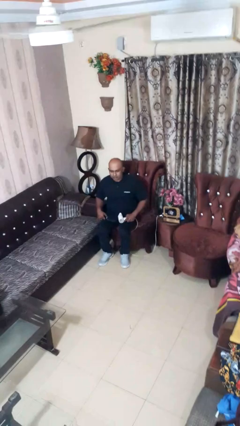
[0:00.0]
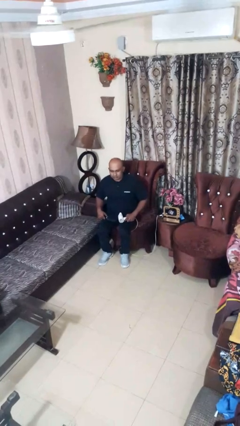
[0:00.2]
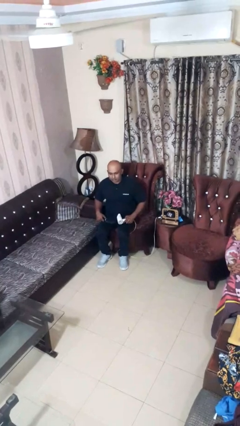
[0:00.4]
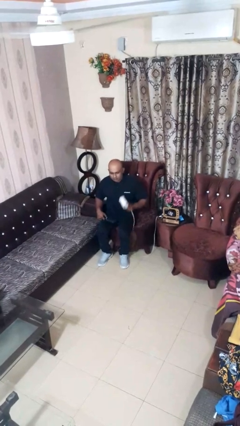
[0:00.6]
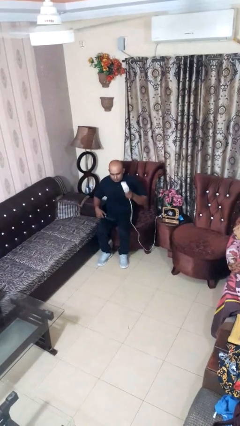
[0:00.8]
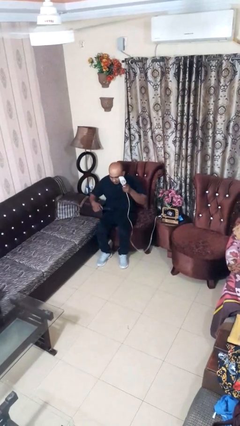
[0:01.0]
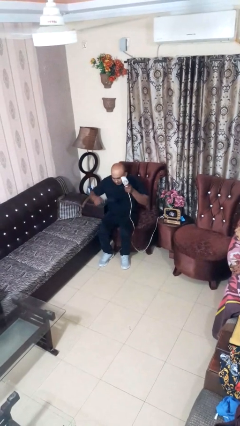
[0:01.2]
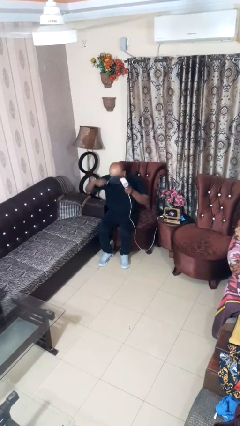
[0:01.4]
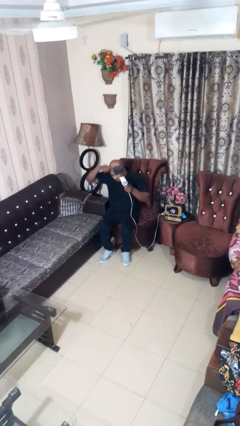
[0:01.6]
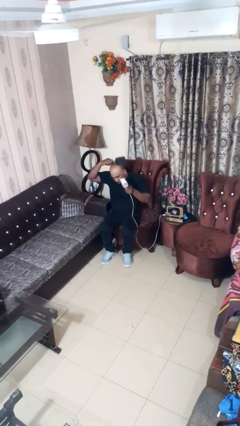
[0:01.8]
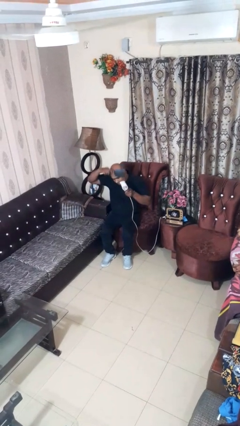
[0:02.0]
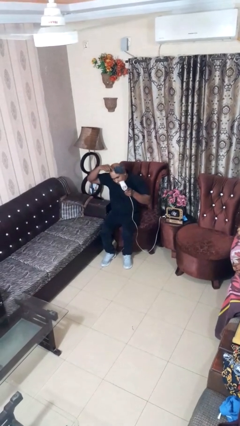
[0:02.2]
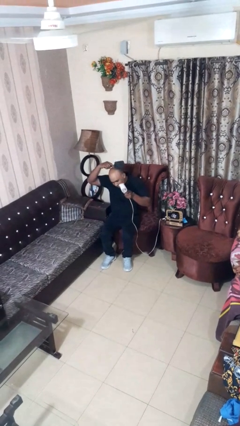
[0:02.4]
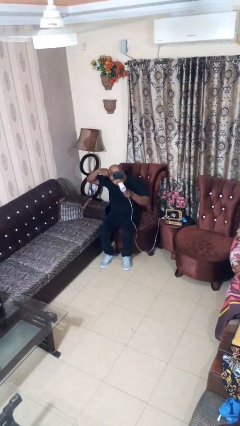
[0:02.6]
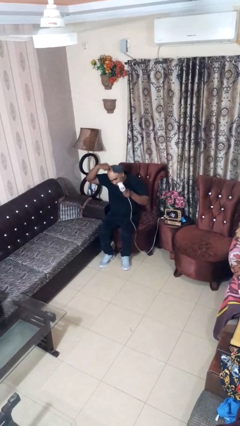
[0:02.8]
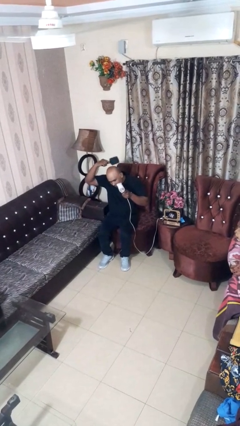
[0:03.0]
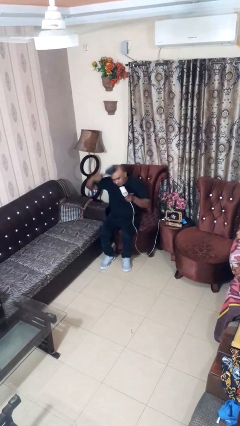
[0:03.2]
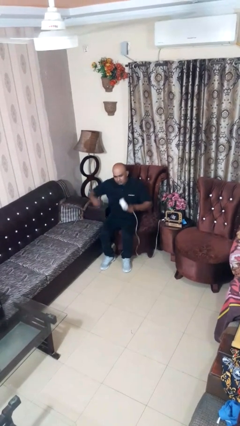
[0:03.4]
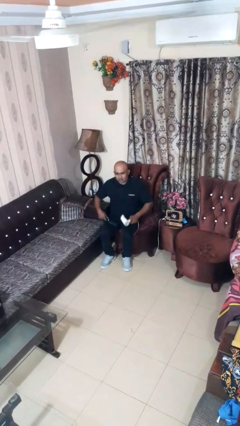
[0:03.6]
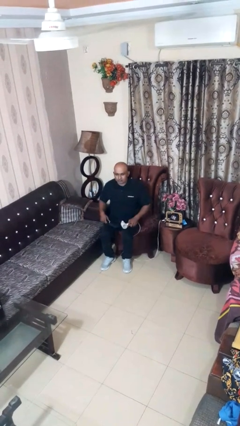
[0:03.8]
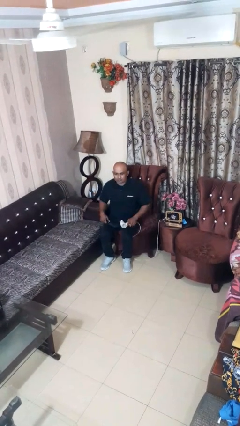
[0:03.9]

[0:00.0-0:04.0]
person dries hair with hairdryer

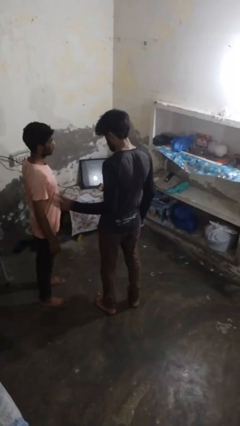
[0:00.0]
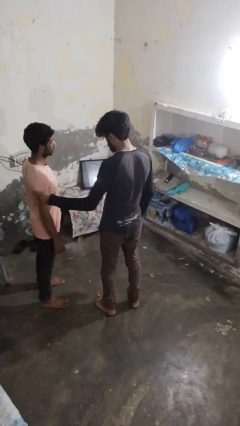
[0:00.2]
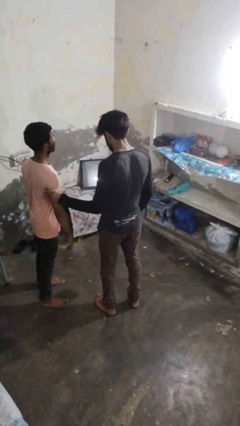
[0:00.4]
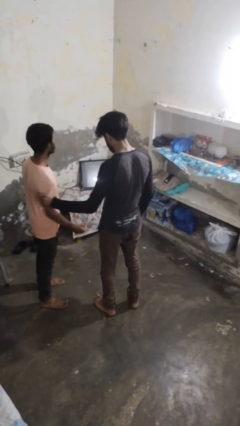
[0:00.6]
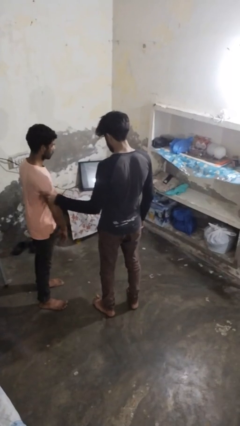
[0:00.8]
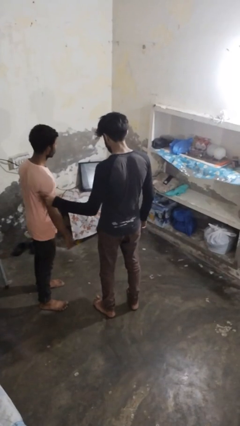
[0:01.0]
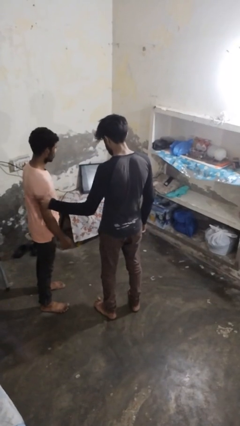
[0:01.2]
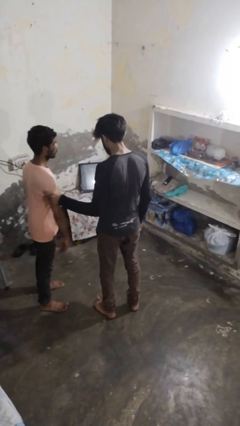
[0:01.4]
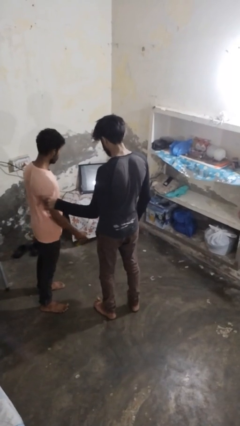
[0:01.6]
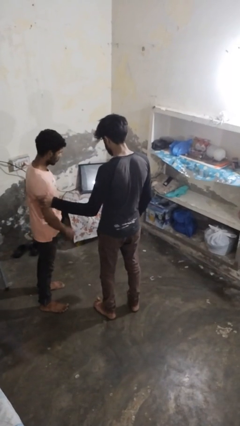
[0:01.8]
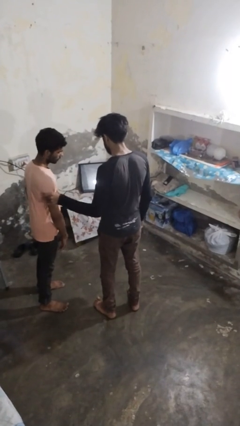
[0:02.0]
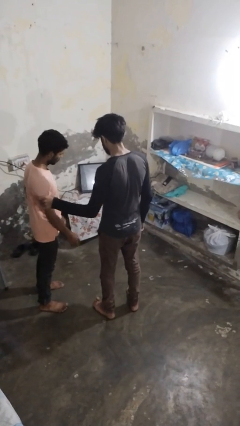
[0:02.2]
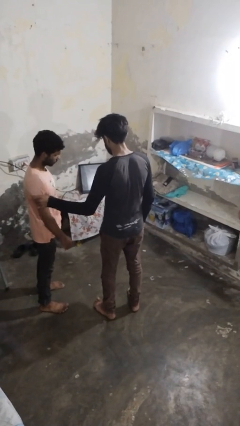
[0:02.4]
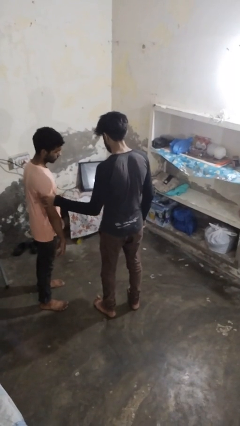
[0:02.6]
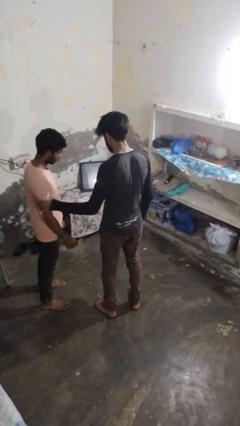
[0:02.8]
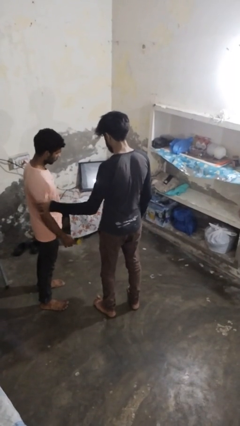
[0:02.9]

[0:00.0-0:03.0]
person grabs person by bicep

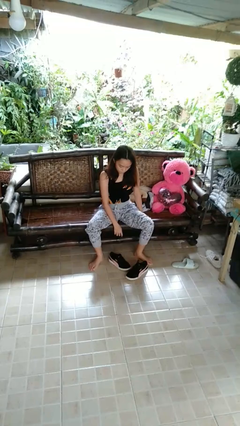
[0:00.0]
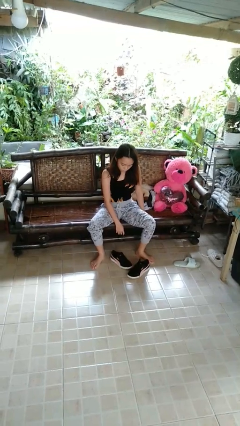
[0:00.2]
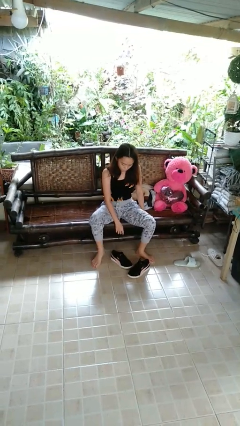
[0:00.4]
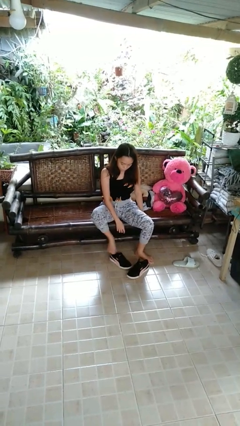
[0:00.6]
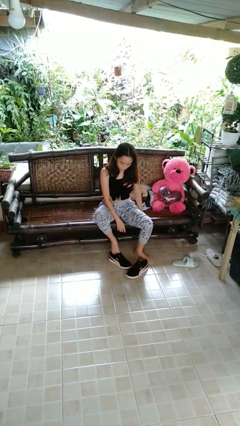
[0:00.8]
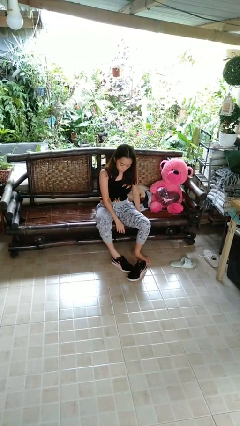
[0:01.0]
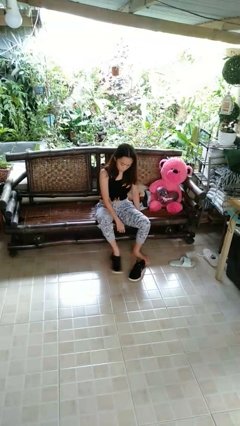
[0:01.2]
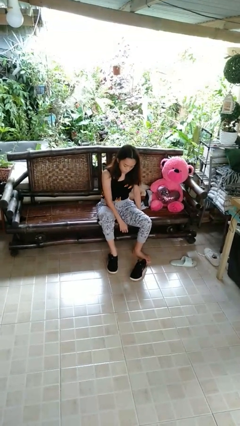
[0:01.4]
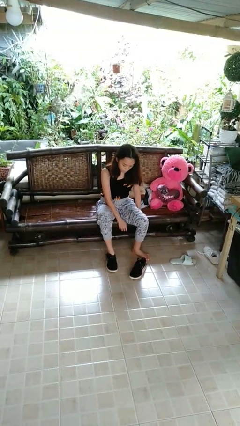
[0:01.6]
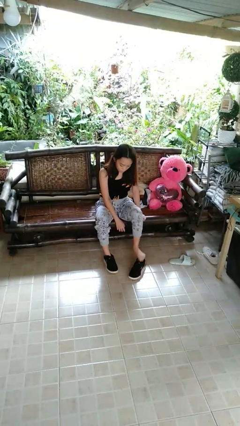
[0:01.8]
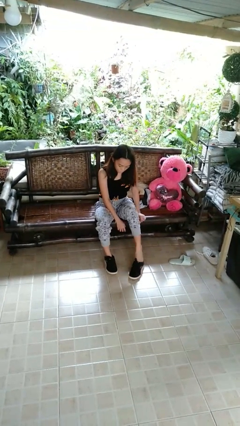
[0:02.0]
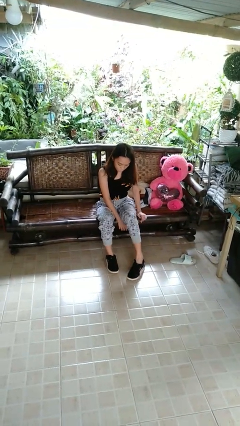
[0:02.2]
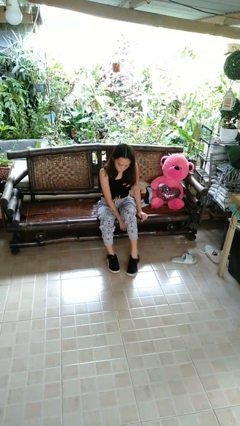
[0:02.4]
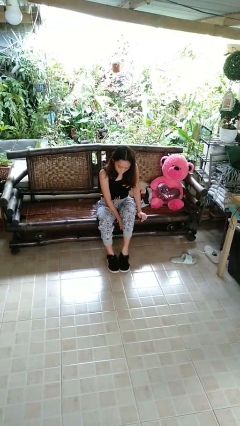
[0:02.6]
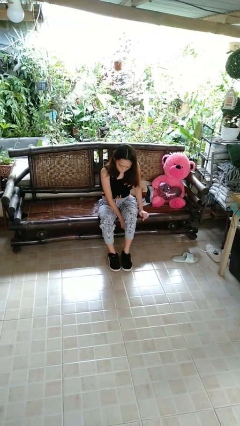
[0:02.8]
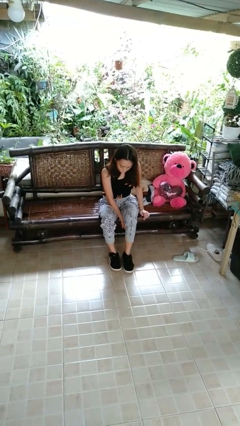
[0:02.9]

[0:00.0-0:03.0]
person puts on shoes

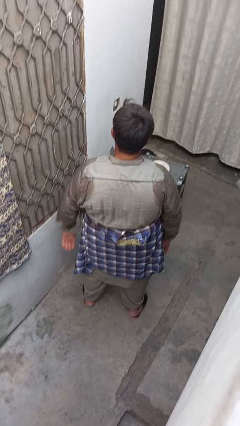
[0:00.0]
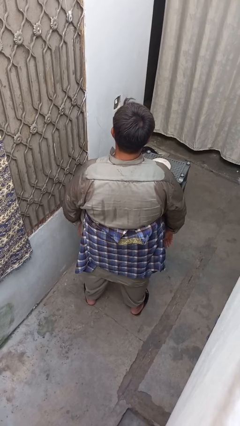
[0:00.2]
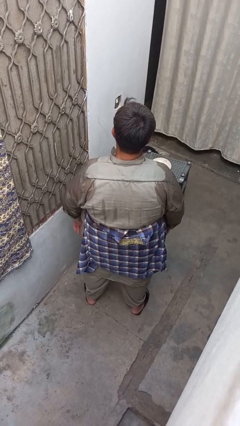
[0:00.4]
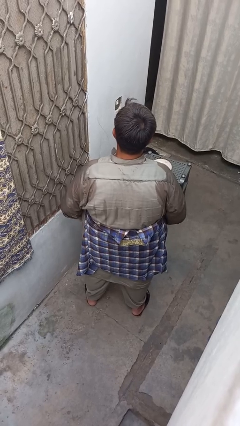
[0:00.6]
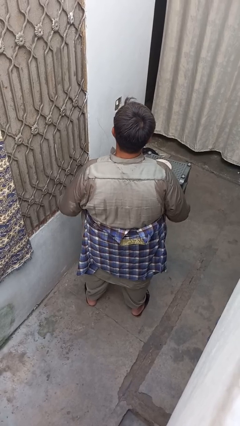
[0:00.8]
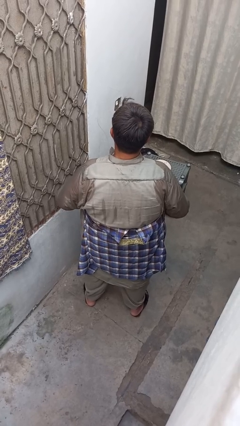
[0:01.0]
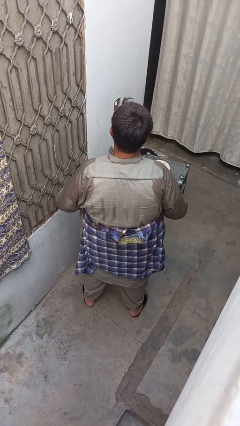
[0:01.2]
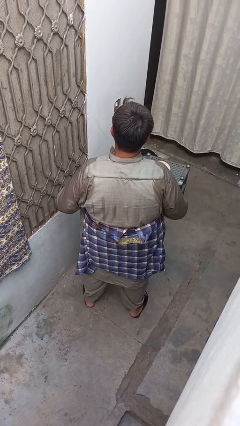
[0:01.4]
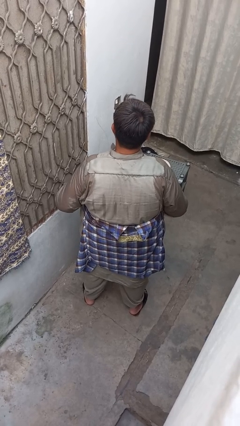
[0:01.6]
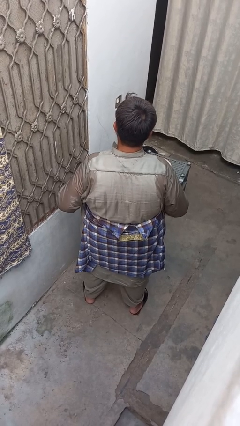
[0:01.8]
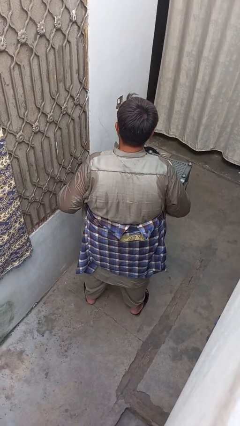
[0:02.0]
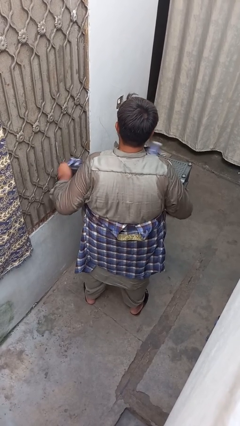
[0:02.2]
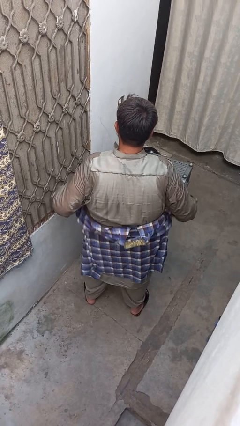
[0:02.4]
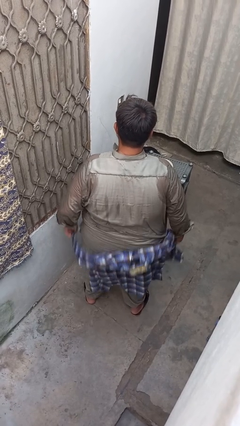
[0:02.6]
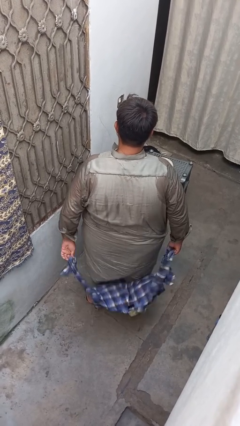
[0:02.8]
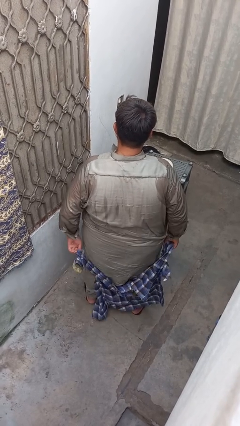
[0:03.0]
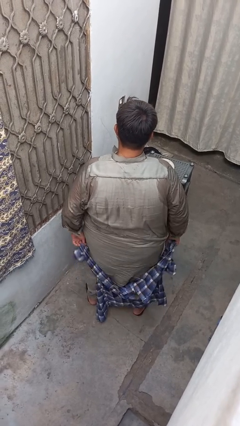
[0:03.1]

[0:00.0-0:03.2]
person unties jacket around waist

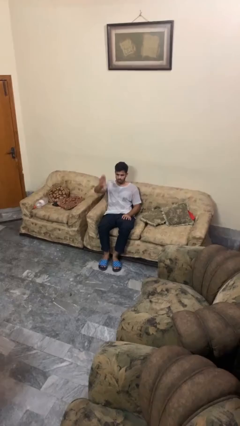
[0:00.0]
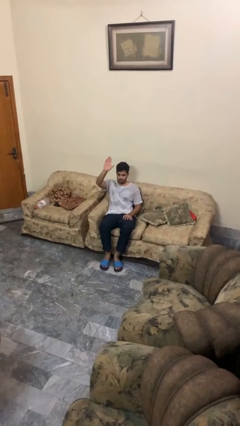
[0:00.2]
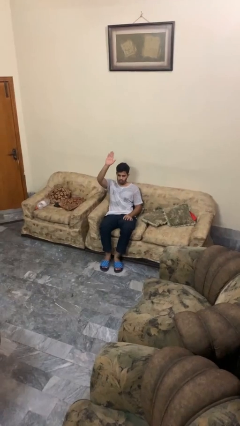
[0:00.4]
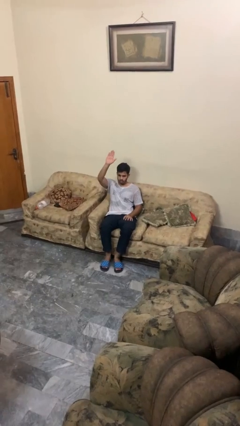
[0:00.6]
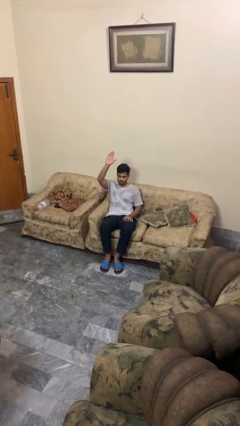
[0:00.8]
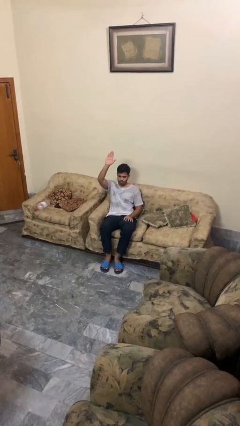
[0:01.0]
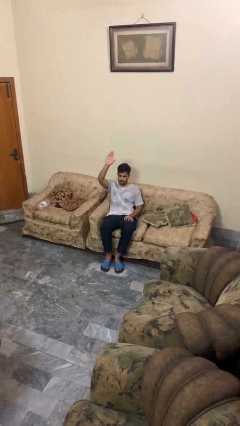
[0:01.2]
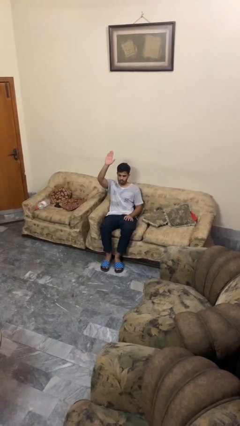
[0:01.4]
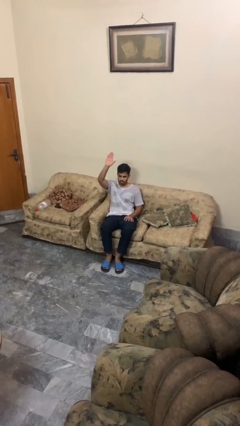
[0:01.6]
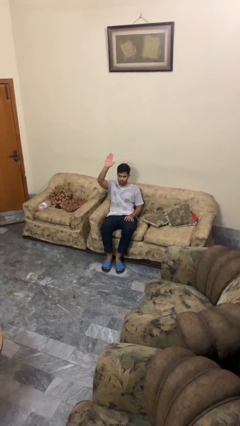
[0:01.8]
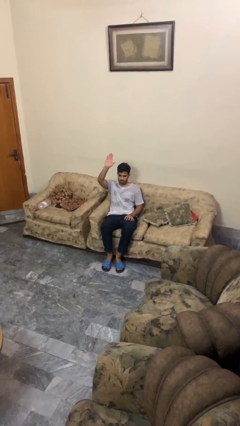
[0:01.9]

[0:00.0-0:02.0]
person gestures raise hand

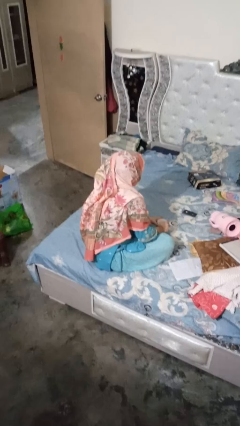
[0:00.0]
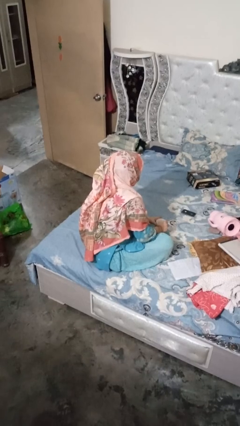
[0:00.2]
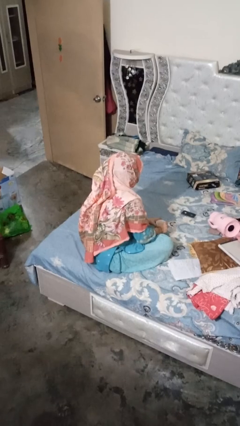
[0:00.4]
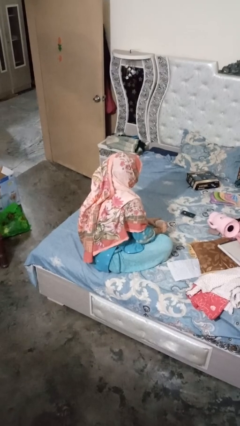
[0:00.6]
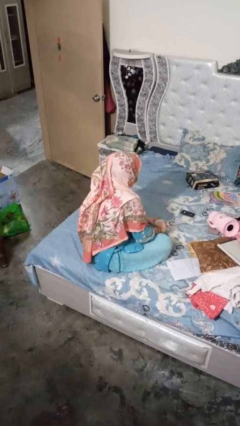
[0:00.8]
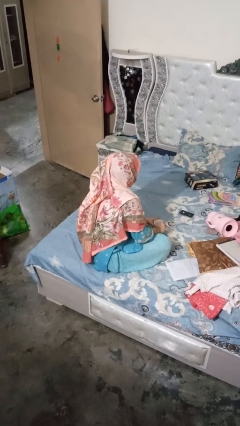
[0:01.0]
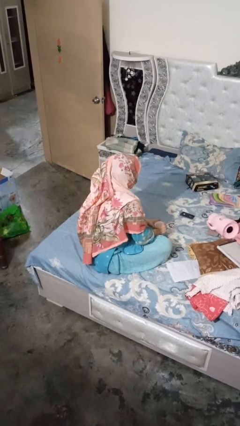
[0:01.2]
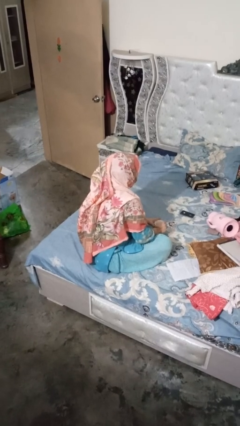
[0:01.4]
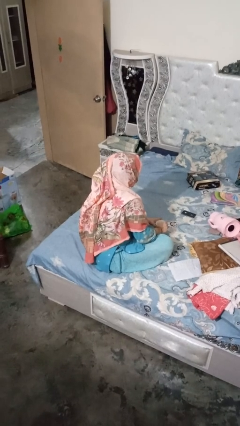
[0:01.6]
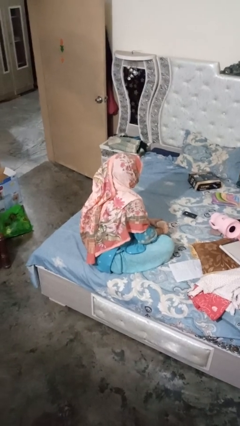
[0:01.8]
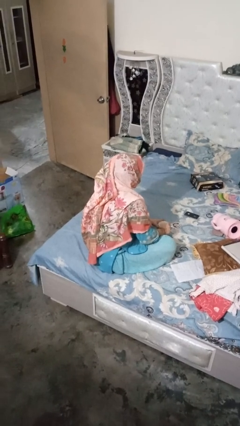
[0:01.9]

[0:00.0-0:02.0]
person stirs mug
